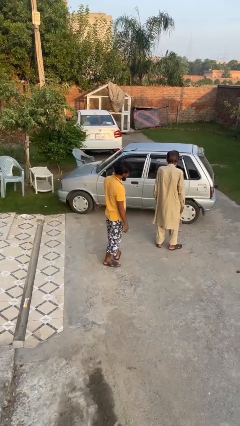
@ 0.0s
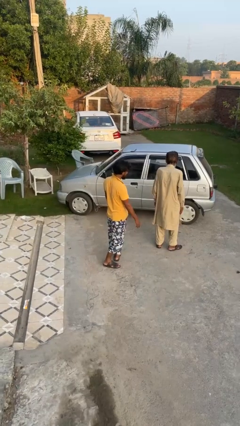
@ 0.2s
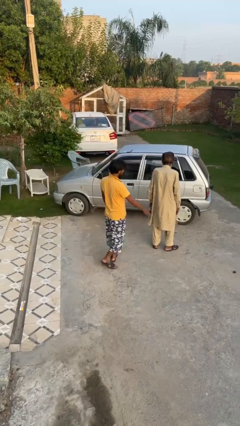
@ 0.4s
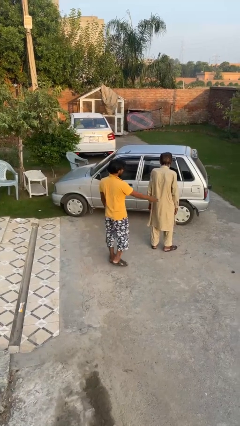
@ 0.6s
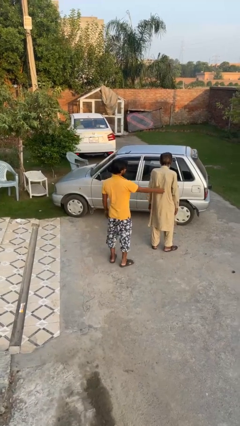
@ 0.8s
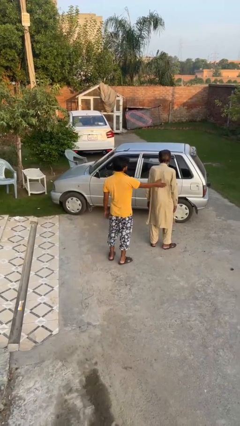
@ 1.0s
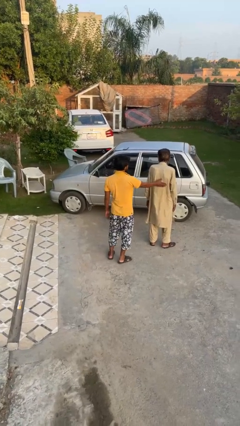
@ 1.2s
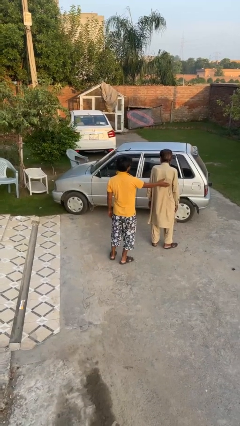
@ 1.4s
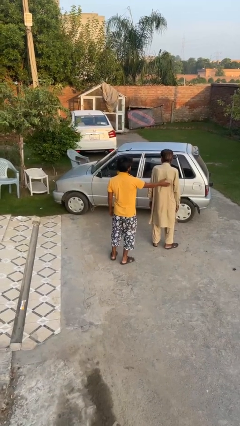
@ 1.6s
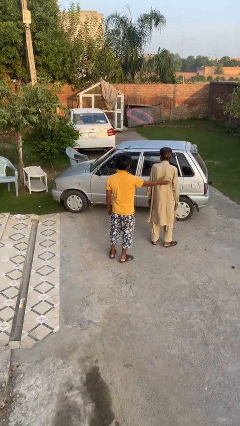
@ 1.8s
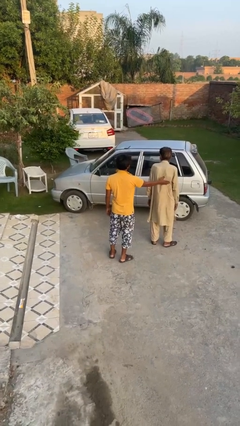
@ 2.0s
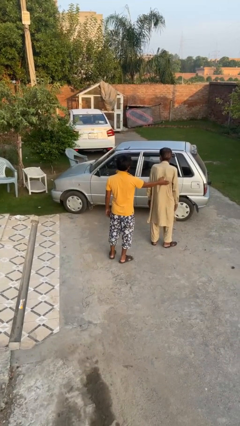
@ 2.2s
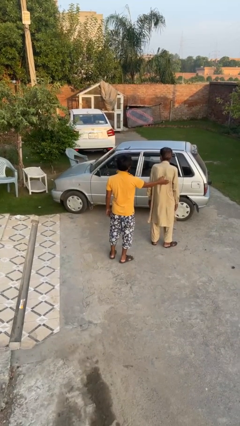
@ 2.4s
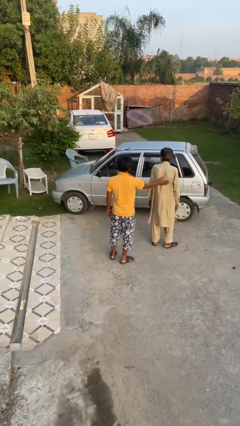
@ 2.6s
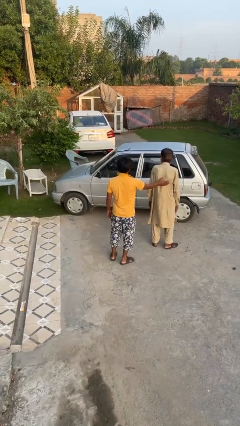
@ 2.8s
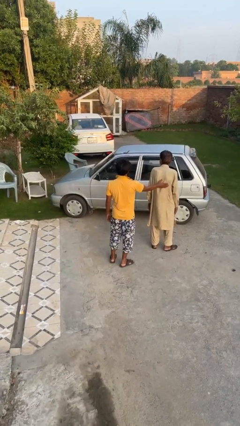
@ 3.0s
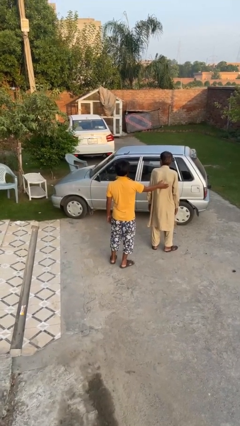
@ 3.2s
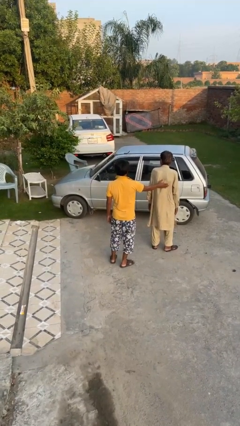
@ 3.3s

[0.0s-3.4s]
person touches back of person

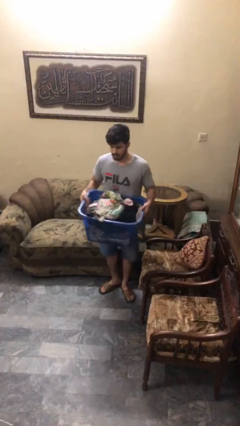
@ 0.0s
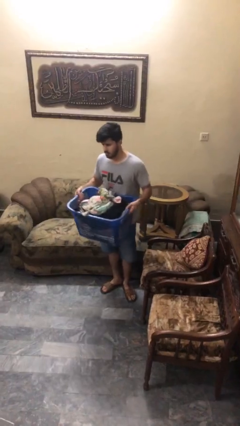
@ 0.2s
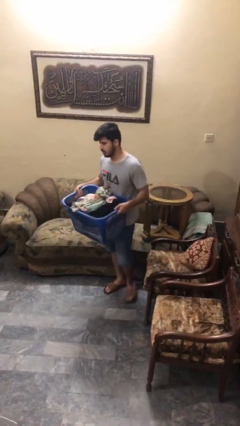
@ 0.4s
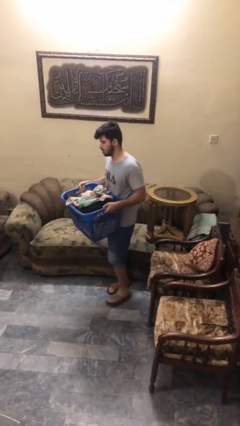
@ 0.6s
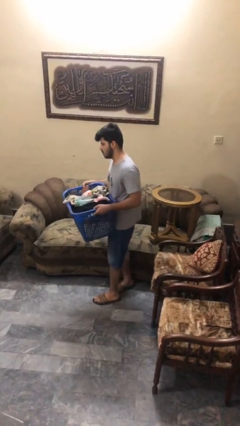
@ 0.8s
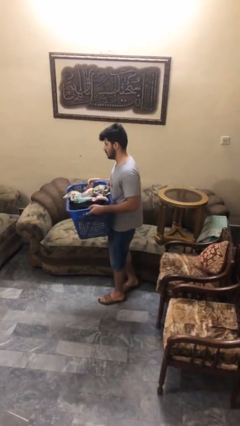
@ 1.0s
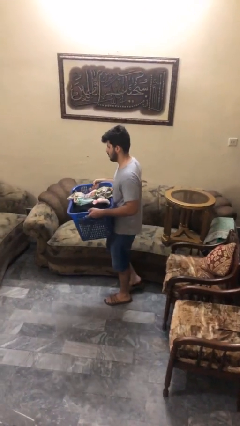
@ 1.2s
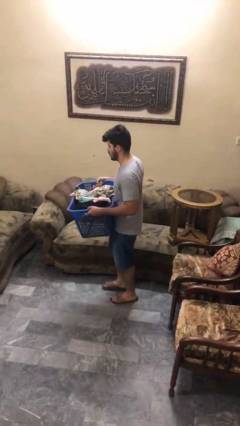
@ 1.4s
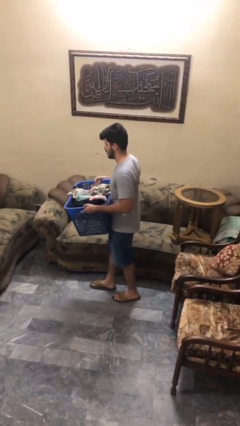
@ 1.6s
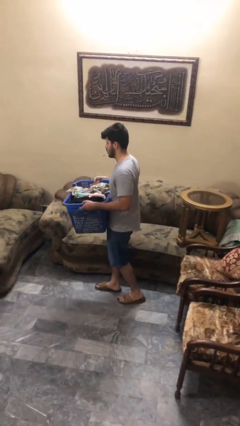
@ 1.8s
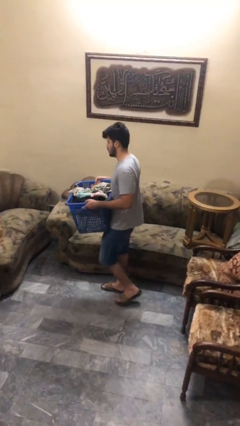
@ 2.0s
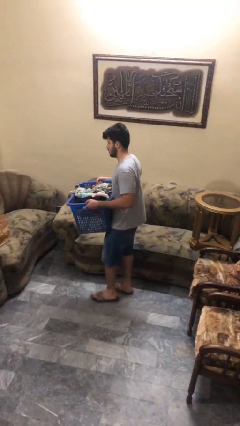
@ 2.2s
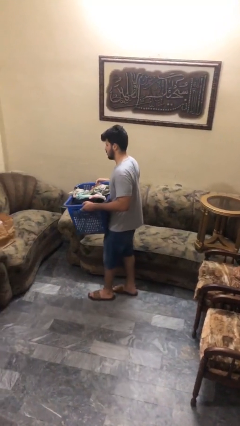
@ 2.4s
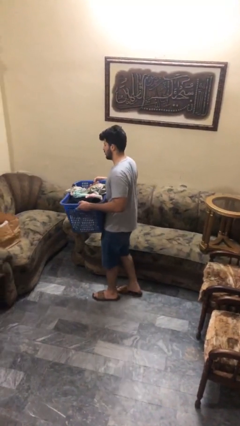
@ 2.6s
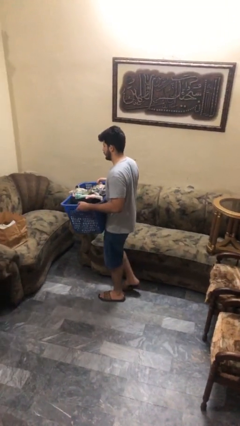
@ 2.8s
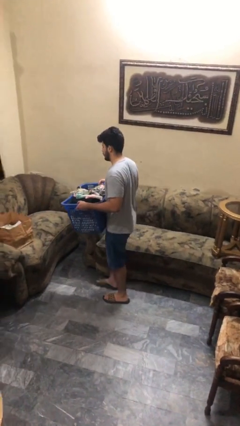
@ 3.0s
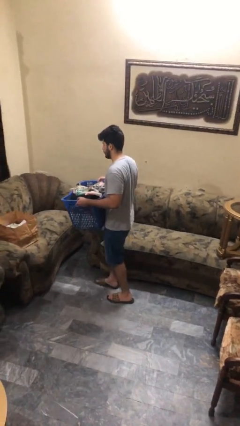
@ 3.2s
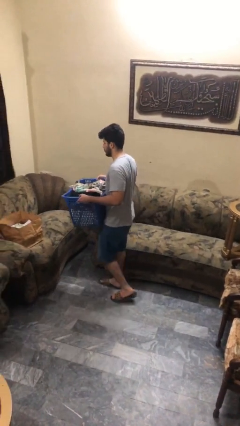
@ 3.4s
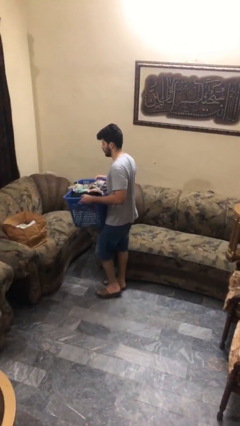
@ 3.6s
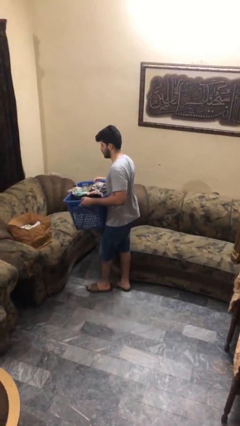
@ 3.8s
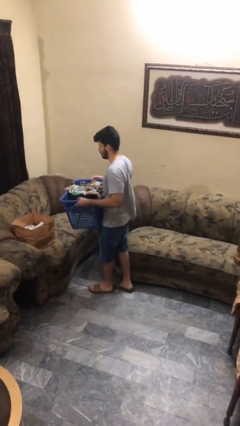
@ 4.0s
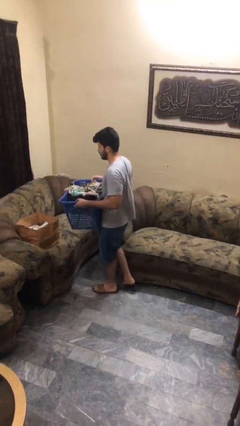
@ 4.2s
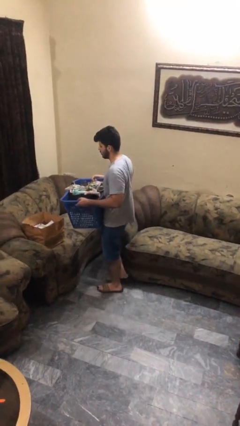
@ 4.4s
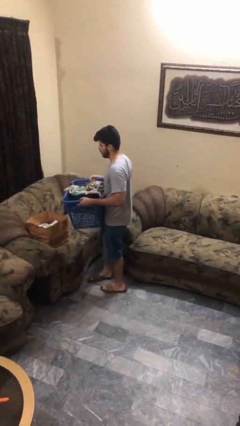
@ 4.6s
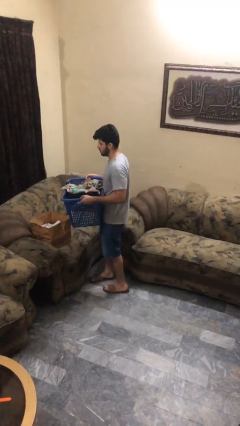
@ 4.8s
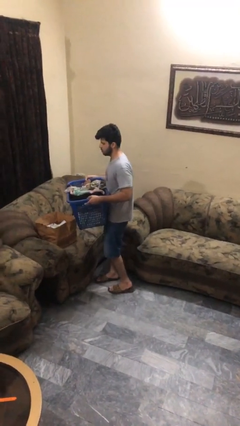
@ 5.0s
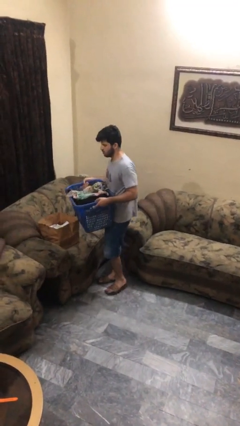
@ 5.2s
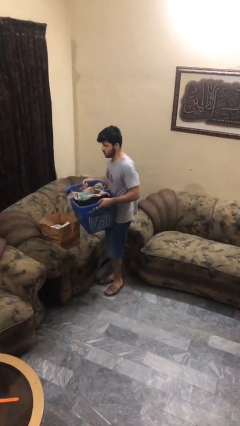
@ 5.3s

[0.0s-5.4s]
person carries laundry basket

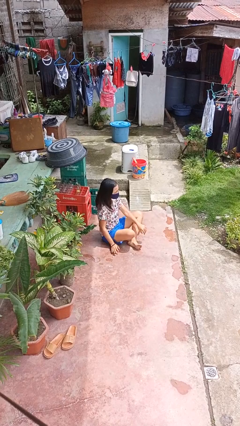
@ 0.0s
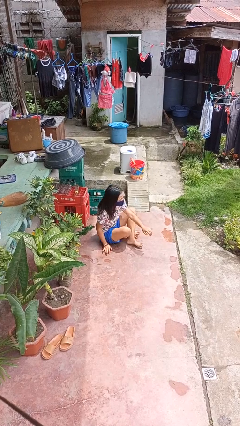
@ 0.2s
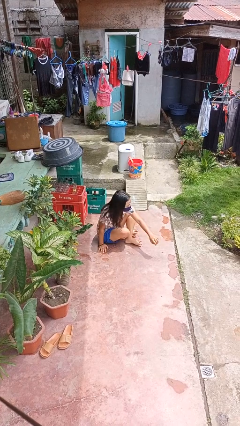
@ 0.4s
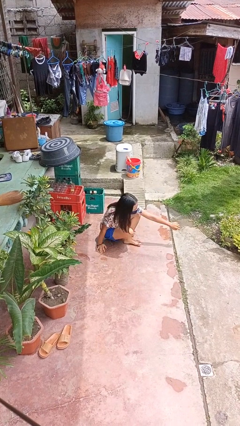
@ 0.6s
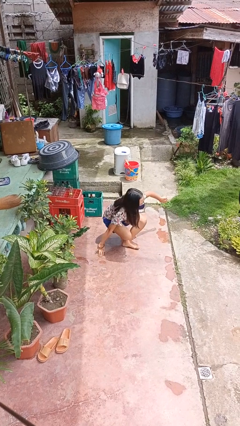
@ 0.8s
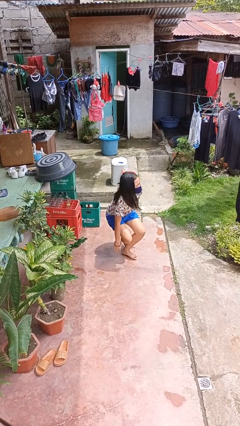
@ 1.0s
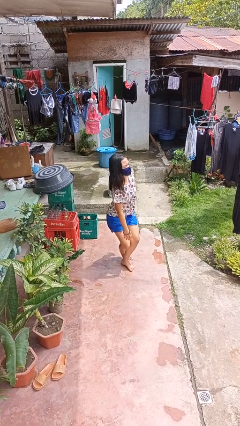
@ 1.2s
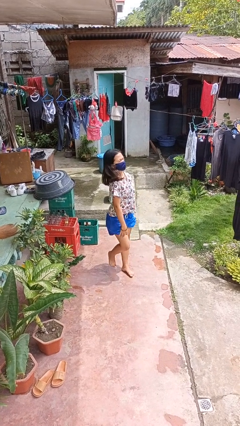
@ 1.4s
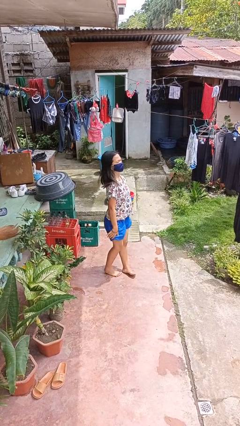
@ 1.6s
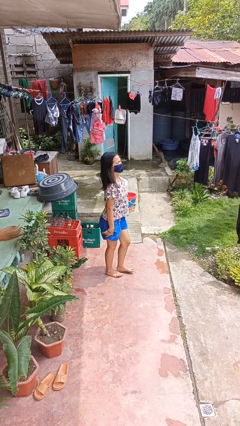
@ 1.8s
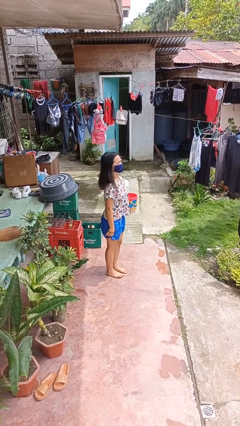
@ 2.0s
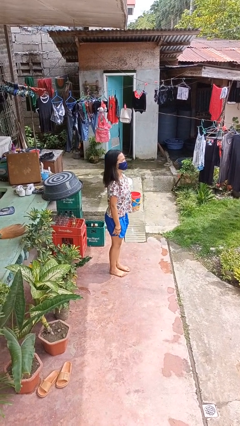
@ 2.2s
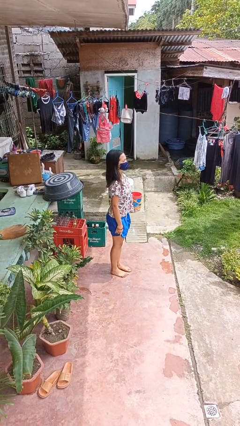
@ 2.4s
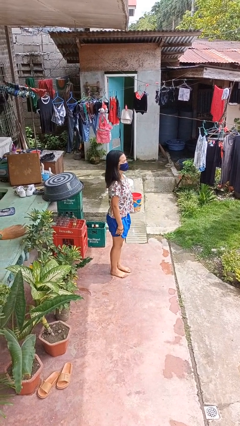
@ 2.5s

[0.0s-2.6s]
person stands up from floor

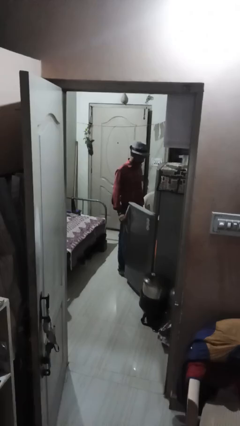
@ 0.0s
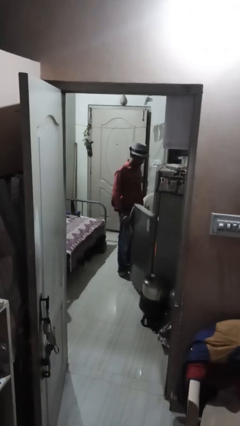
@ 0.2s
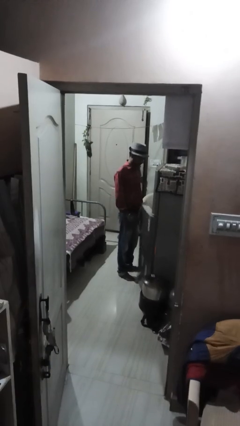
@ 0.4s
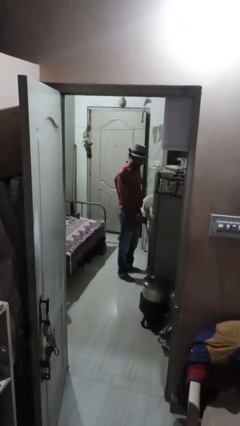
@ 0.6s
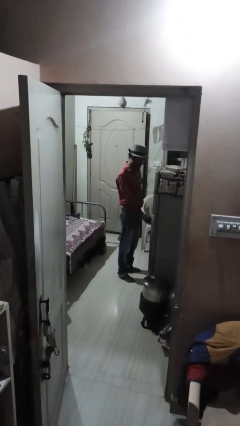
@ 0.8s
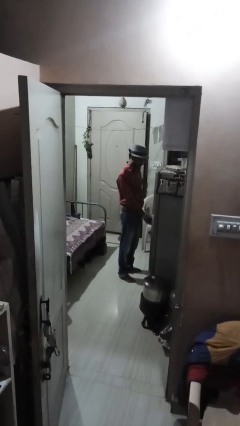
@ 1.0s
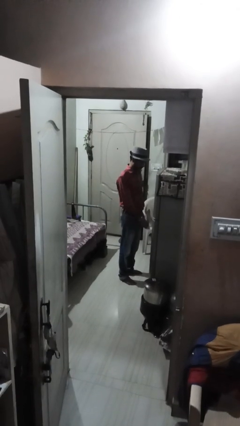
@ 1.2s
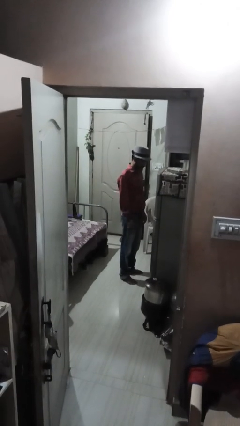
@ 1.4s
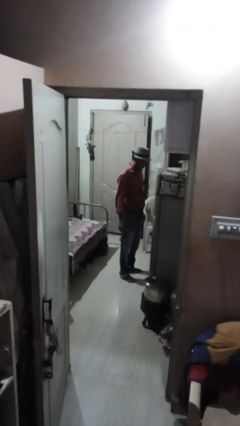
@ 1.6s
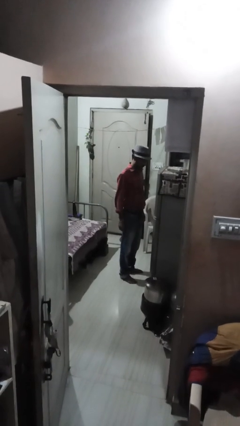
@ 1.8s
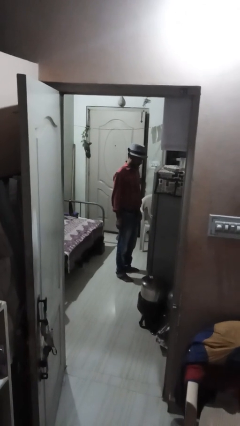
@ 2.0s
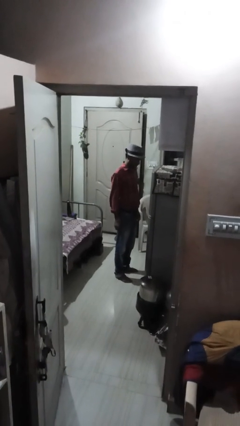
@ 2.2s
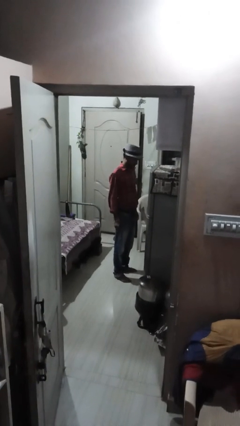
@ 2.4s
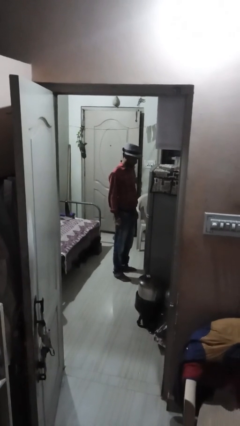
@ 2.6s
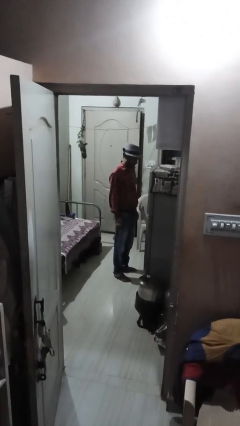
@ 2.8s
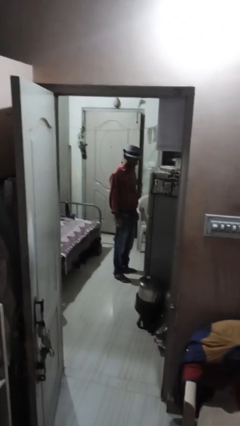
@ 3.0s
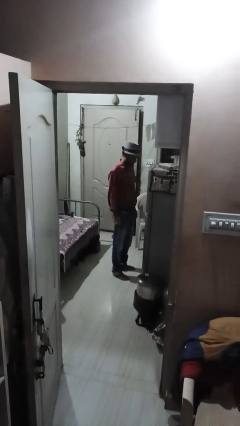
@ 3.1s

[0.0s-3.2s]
person closes refrigerator

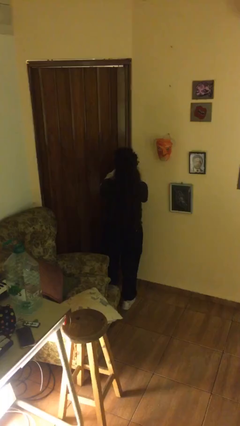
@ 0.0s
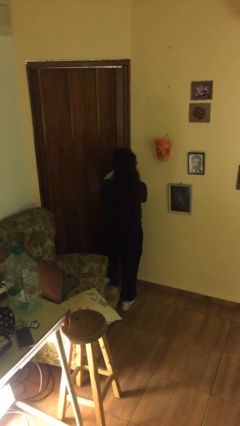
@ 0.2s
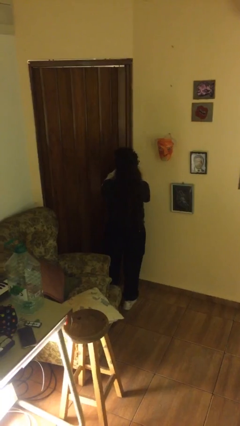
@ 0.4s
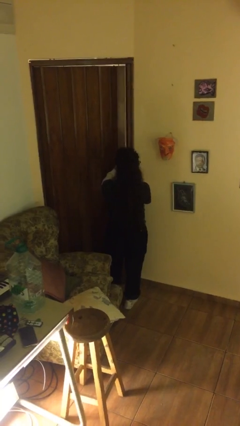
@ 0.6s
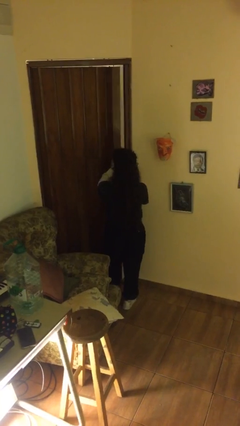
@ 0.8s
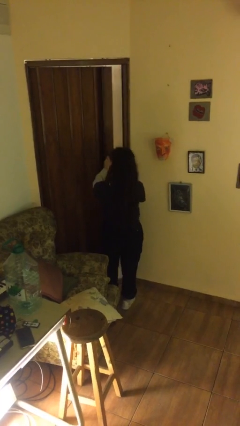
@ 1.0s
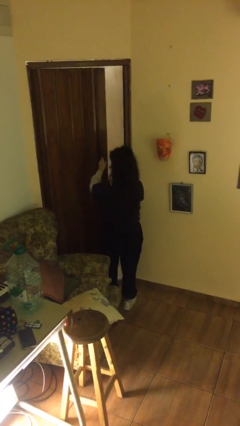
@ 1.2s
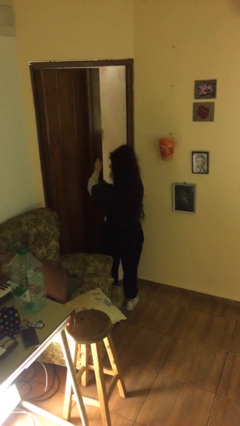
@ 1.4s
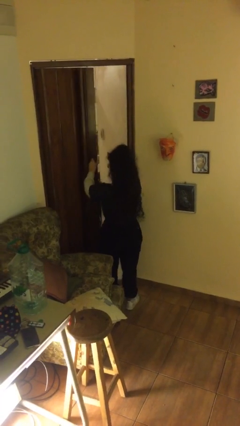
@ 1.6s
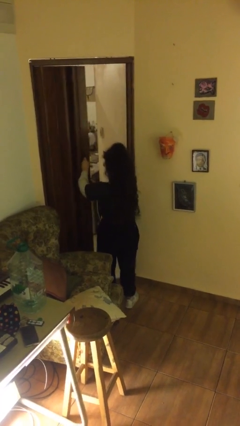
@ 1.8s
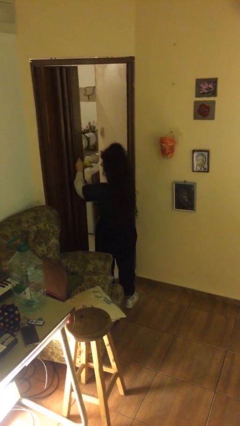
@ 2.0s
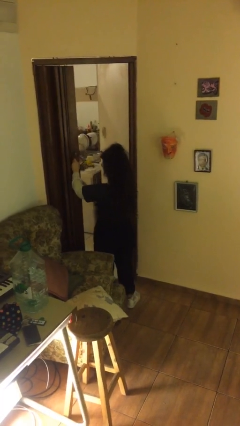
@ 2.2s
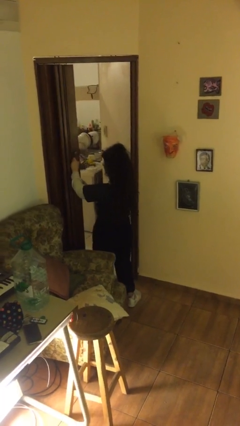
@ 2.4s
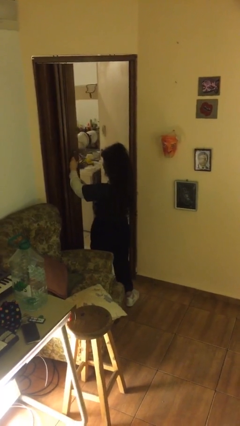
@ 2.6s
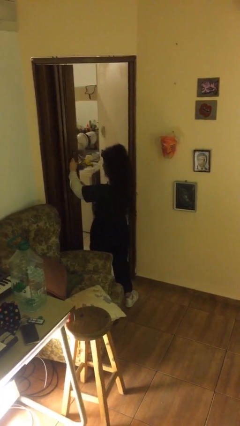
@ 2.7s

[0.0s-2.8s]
person opens sliding door

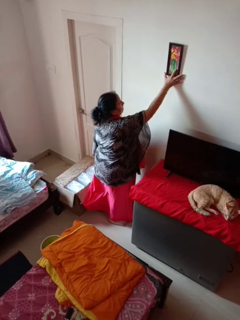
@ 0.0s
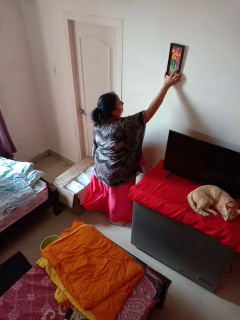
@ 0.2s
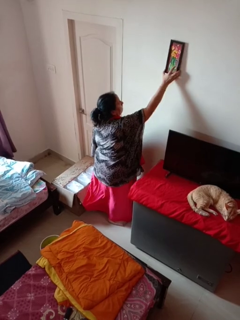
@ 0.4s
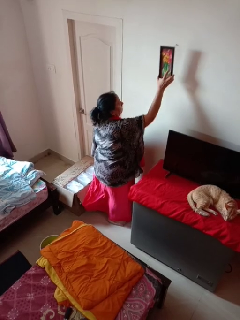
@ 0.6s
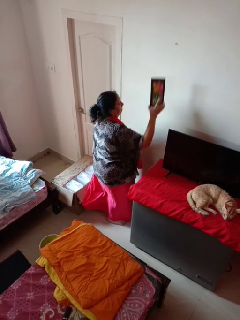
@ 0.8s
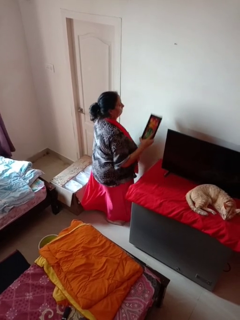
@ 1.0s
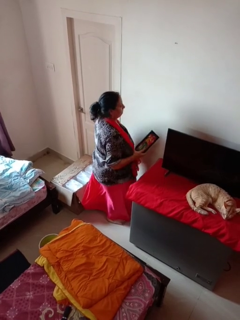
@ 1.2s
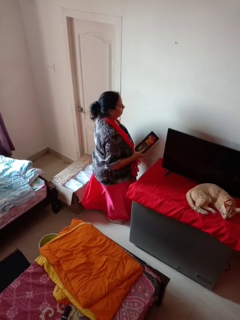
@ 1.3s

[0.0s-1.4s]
person takes down picture frame
